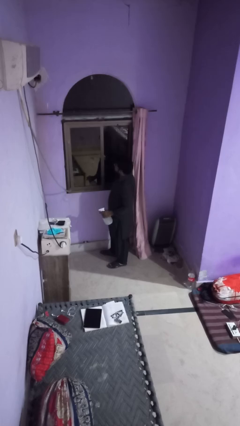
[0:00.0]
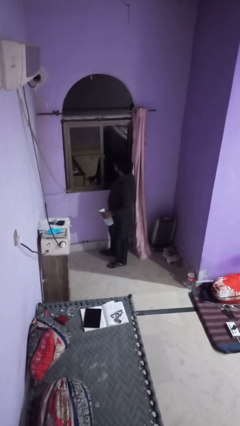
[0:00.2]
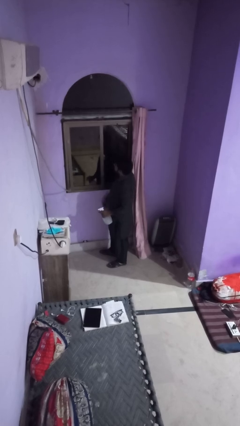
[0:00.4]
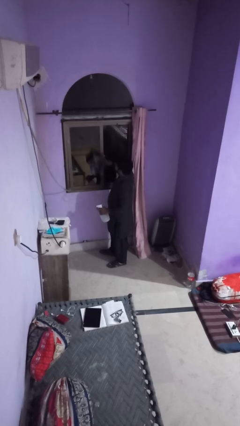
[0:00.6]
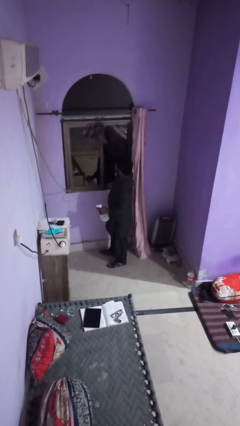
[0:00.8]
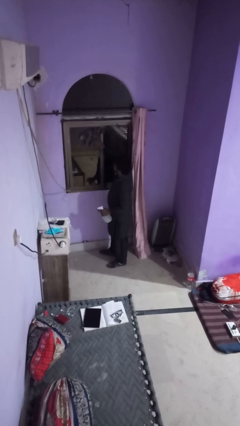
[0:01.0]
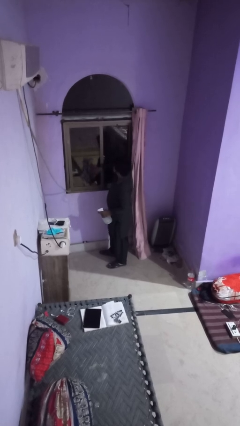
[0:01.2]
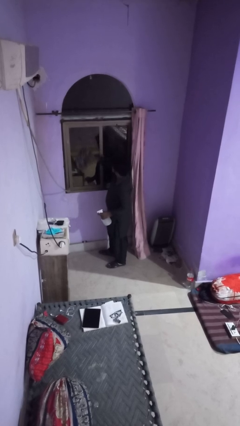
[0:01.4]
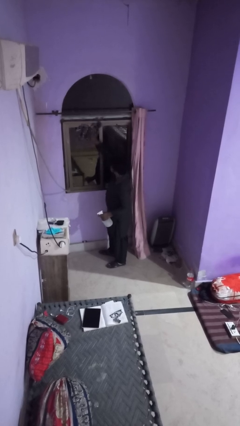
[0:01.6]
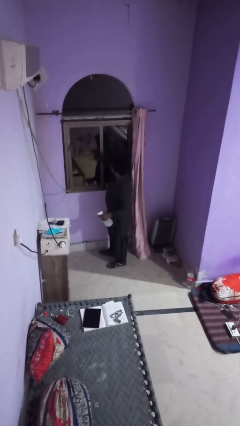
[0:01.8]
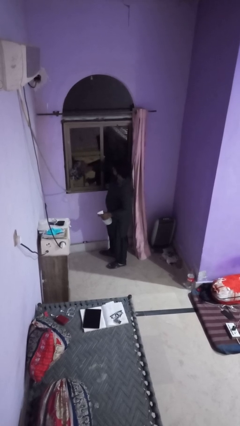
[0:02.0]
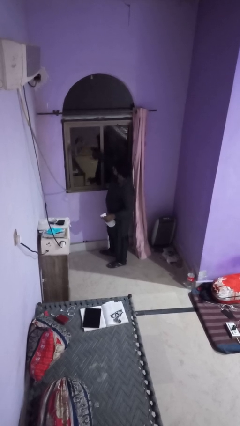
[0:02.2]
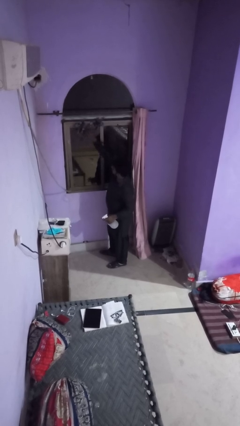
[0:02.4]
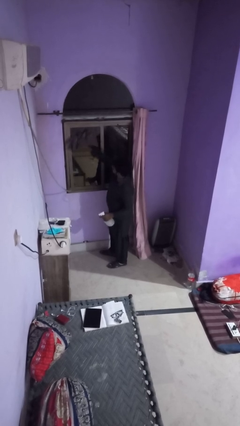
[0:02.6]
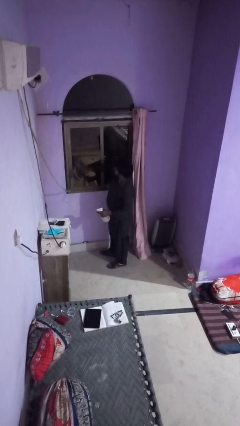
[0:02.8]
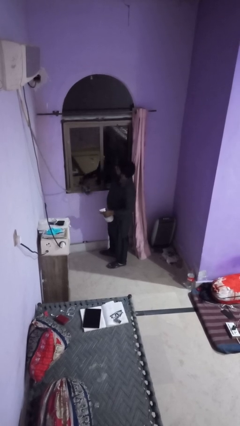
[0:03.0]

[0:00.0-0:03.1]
person washes window

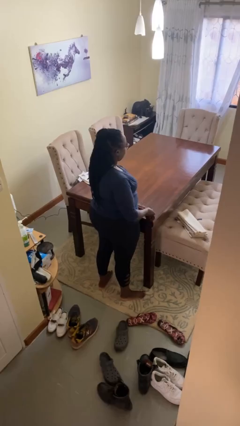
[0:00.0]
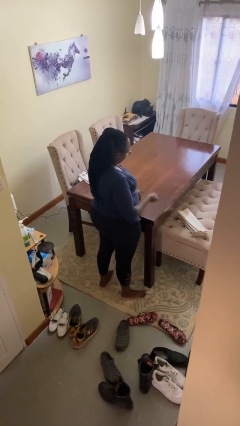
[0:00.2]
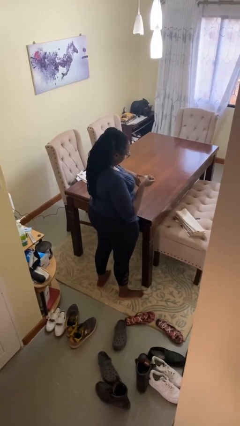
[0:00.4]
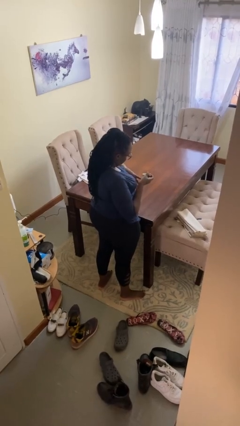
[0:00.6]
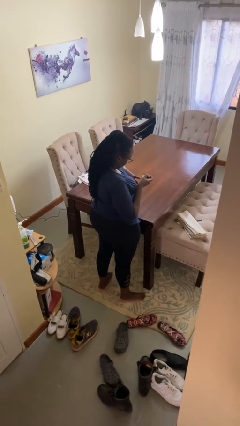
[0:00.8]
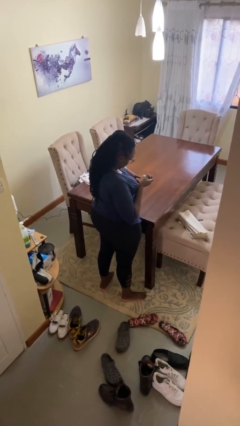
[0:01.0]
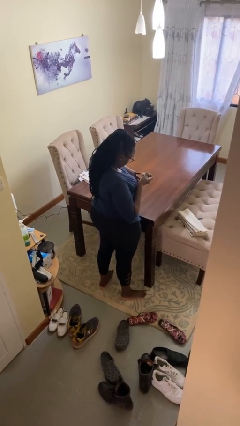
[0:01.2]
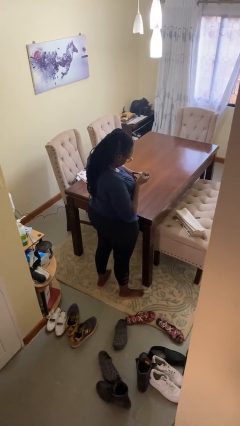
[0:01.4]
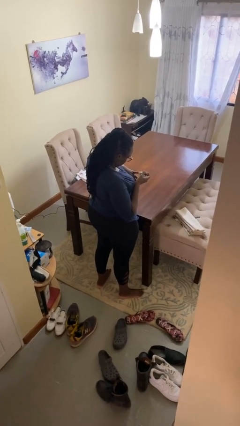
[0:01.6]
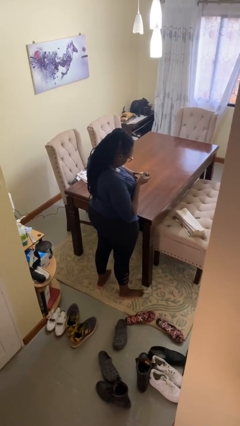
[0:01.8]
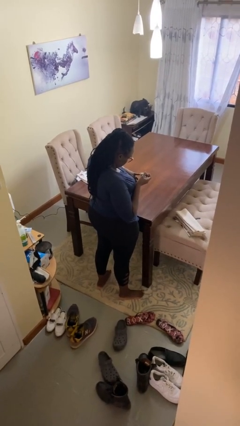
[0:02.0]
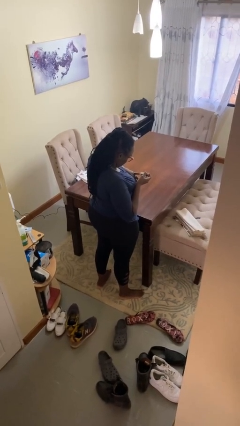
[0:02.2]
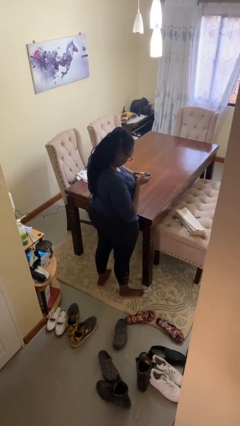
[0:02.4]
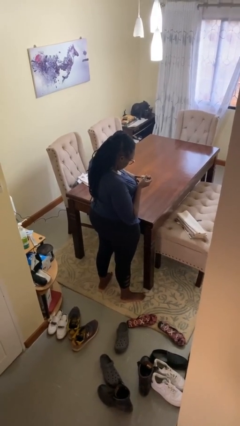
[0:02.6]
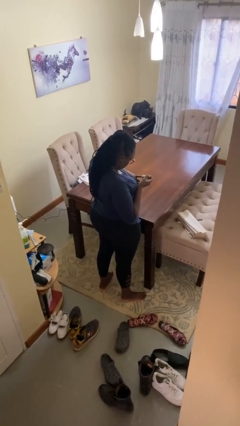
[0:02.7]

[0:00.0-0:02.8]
person clips fingernails

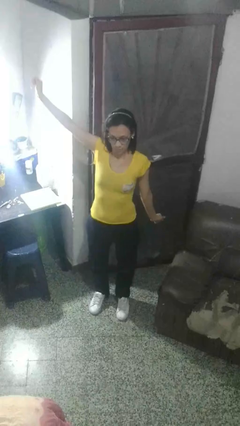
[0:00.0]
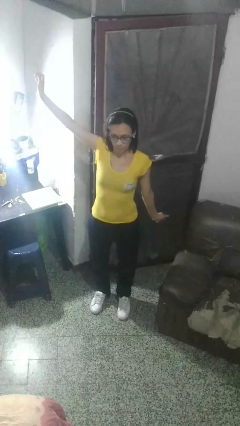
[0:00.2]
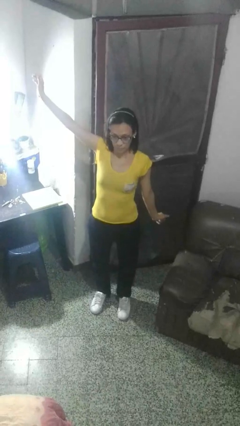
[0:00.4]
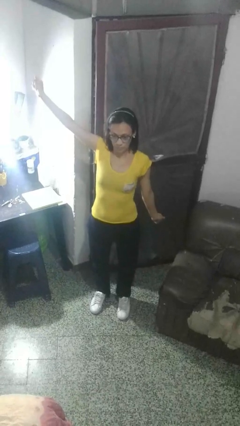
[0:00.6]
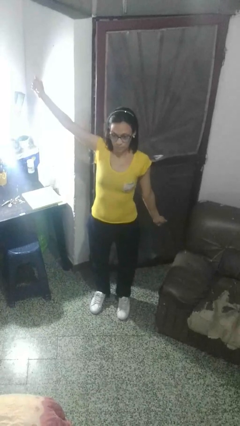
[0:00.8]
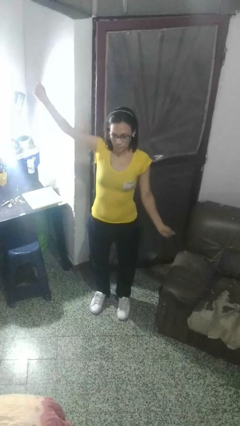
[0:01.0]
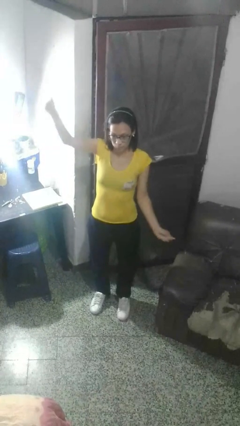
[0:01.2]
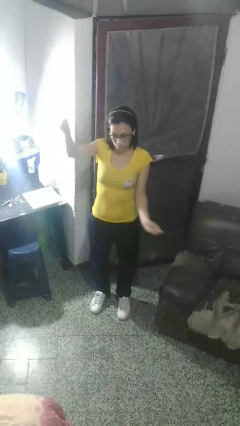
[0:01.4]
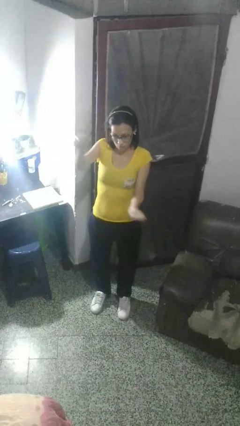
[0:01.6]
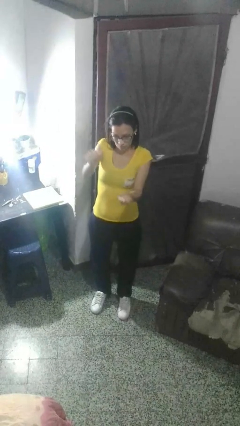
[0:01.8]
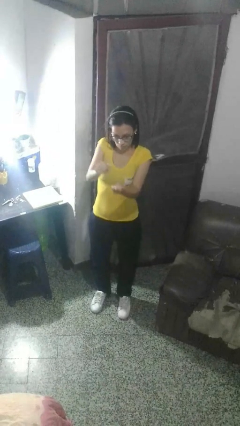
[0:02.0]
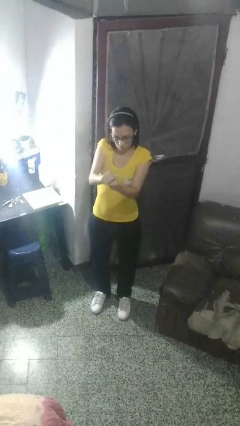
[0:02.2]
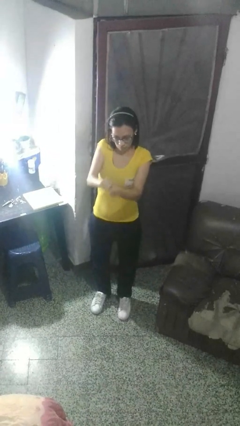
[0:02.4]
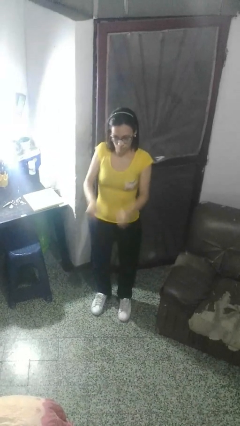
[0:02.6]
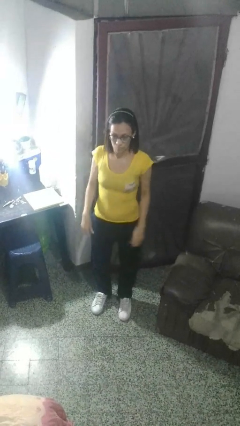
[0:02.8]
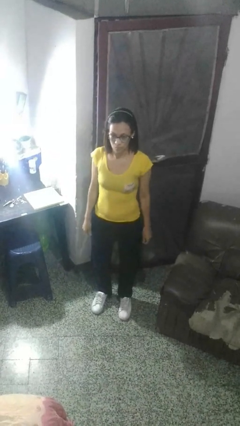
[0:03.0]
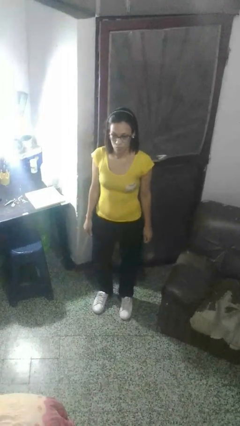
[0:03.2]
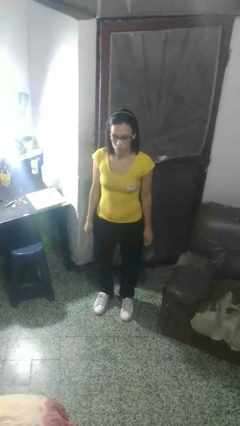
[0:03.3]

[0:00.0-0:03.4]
person gestures zoom out

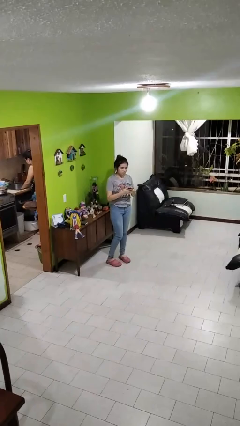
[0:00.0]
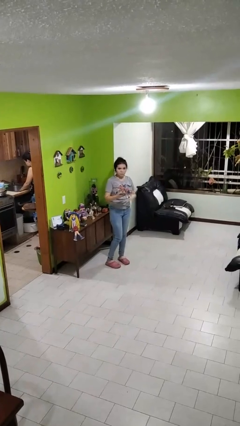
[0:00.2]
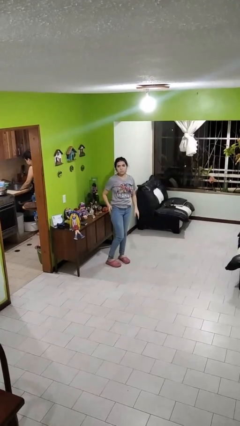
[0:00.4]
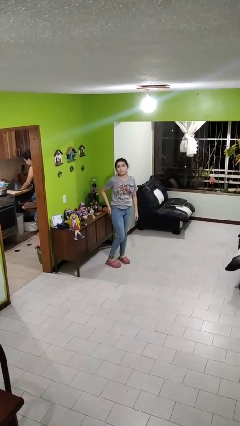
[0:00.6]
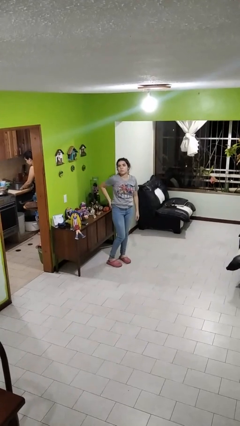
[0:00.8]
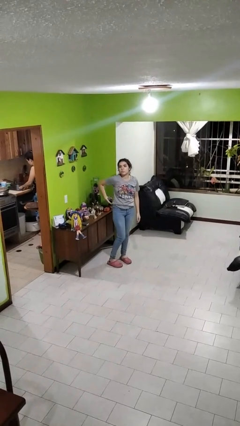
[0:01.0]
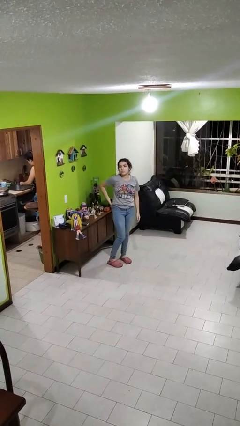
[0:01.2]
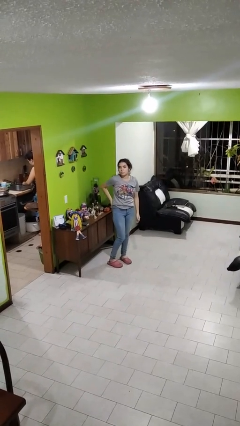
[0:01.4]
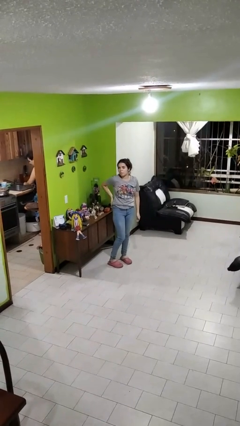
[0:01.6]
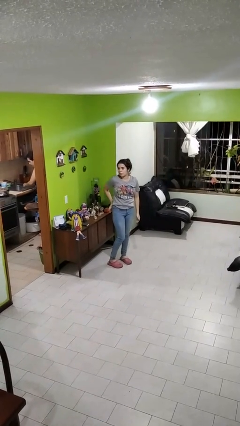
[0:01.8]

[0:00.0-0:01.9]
person puts phone into pocket

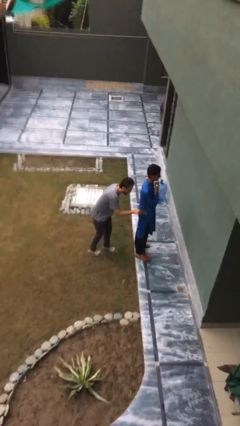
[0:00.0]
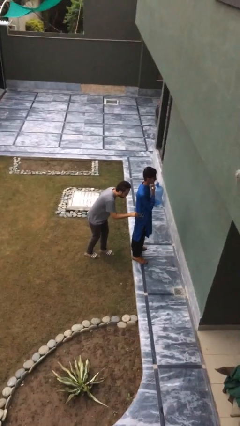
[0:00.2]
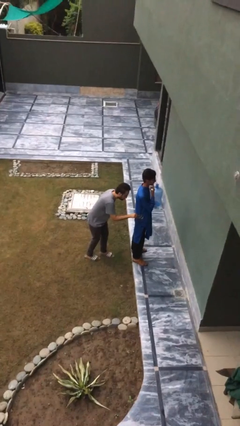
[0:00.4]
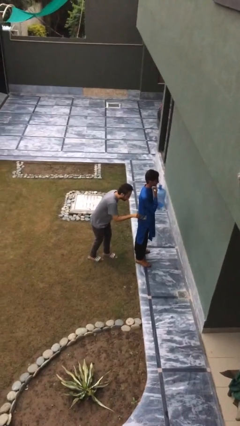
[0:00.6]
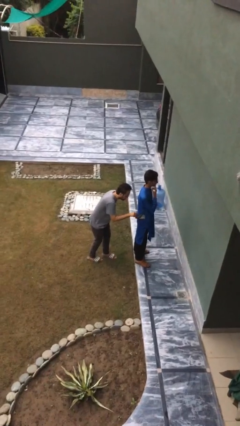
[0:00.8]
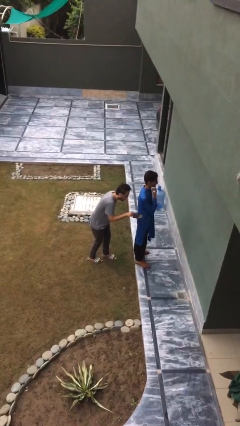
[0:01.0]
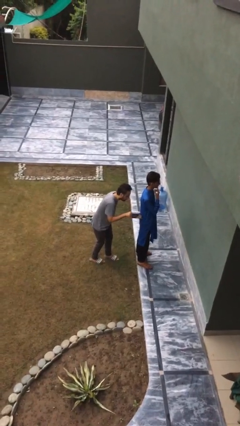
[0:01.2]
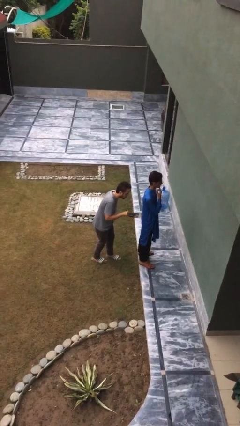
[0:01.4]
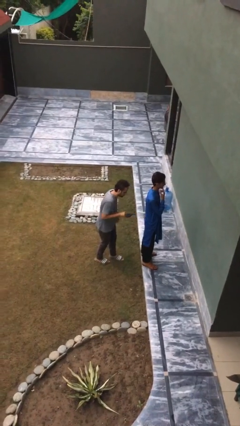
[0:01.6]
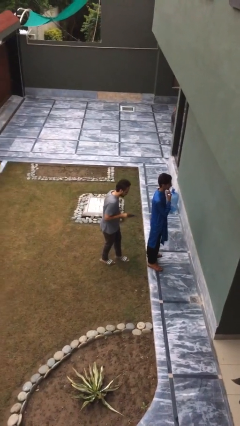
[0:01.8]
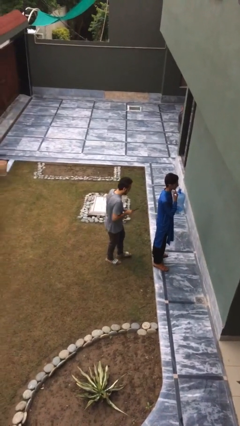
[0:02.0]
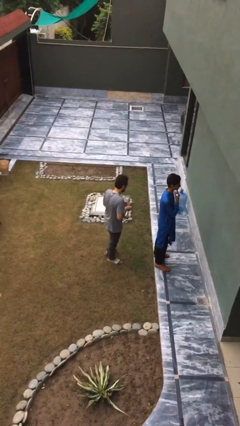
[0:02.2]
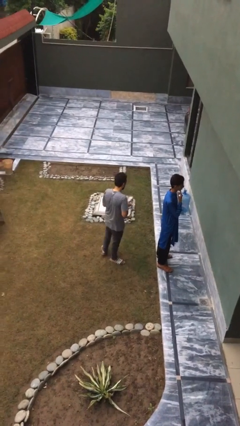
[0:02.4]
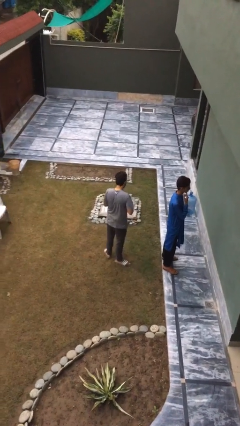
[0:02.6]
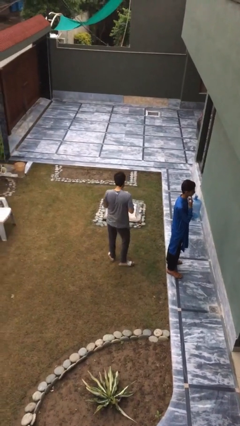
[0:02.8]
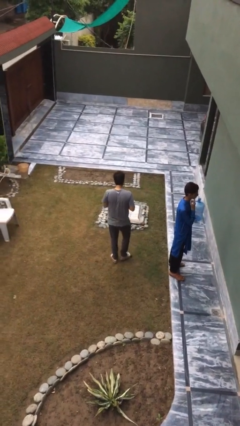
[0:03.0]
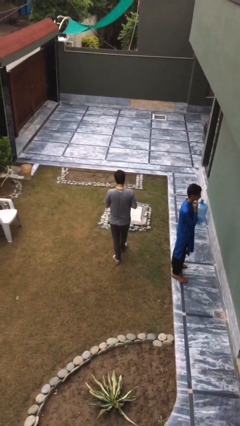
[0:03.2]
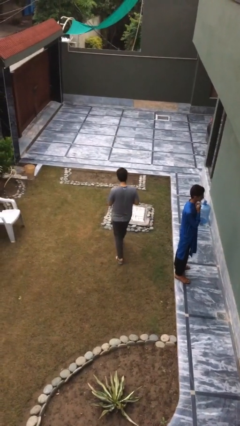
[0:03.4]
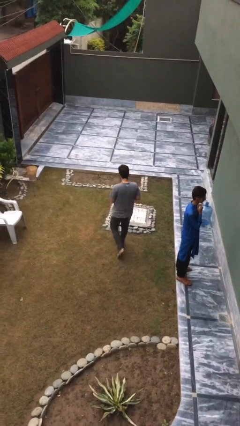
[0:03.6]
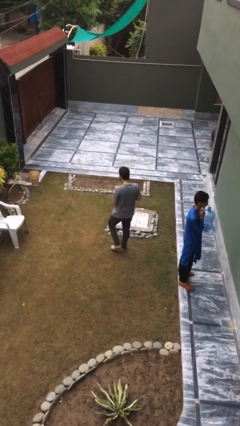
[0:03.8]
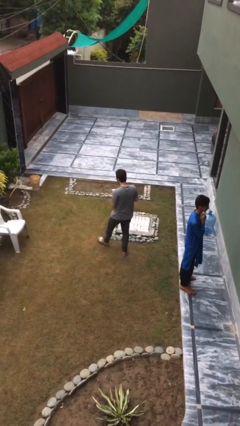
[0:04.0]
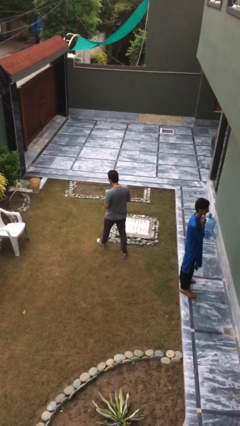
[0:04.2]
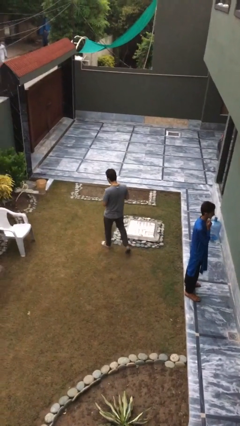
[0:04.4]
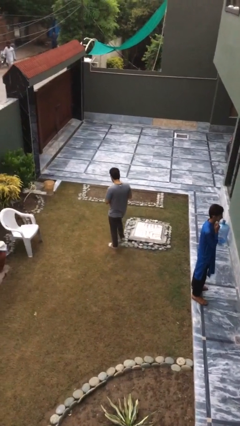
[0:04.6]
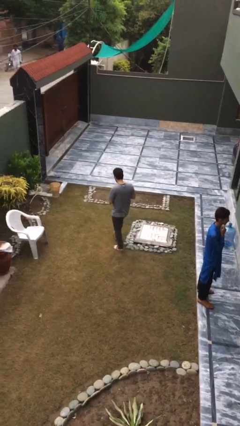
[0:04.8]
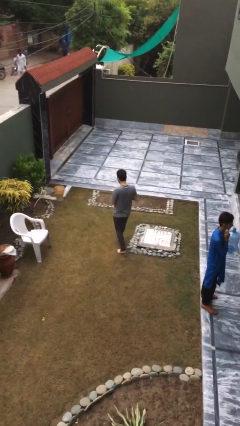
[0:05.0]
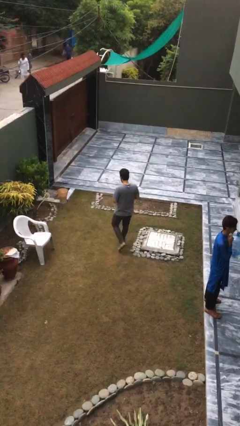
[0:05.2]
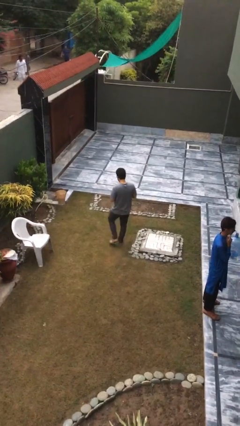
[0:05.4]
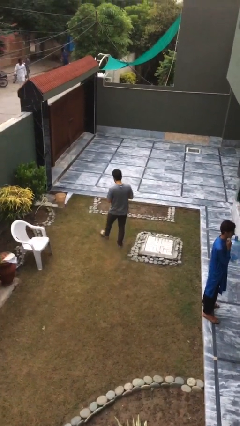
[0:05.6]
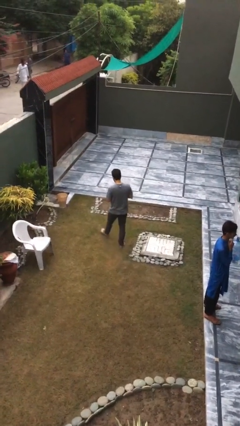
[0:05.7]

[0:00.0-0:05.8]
person steals object from person

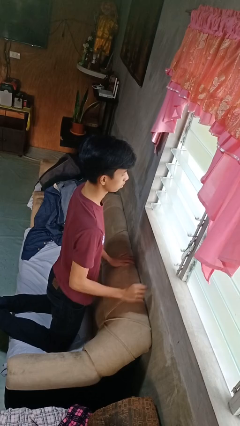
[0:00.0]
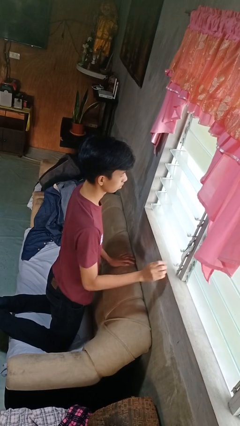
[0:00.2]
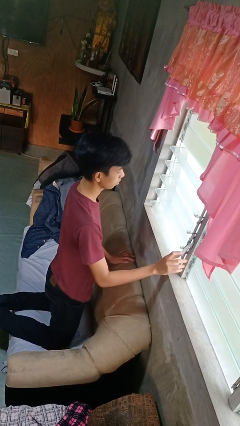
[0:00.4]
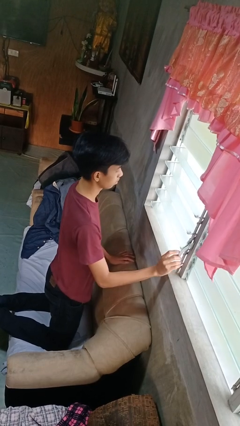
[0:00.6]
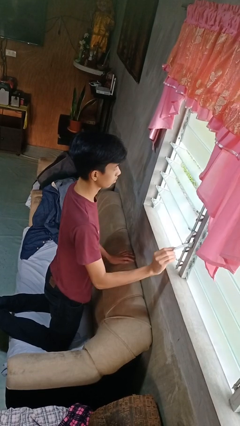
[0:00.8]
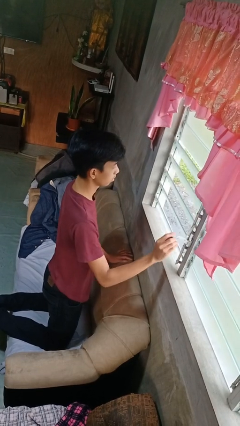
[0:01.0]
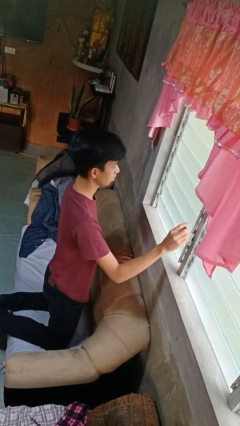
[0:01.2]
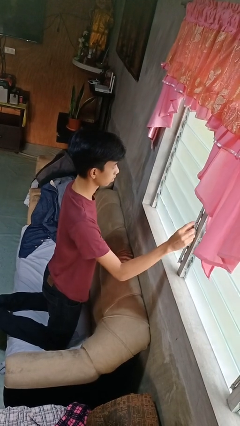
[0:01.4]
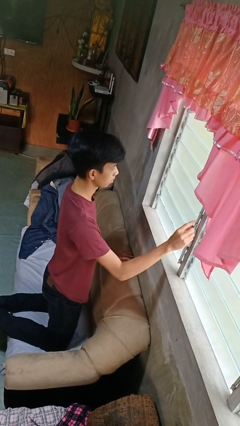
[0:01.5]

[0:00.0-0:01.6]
person closes home window
